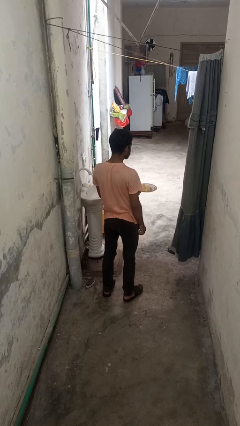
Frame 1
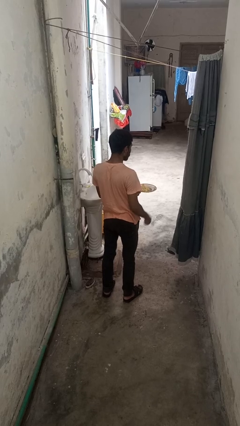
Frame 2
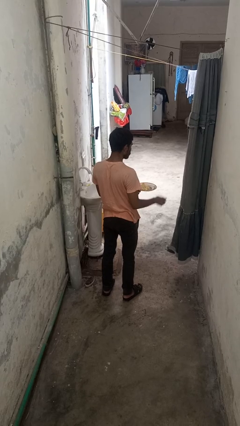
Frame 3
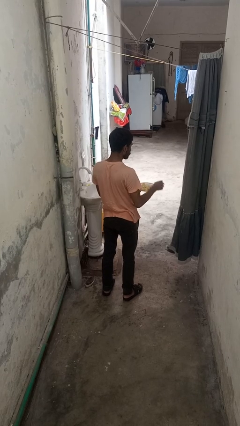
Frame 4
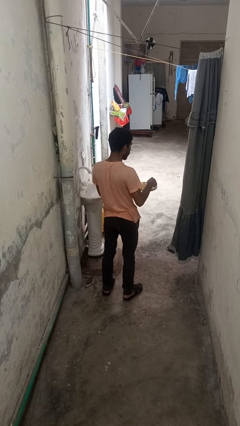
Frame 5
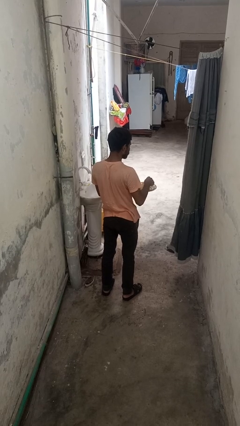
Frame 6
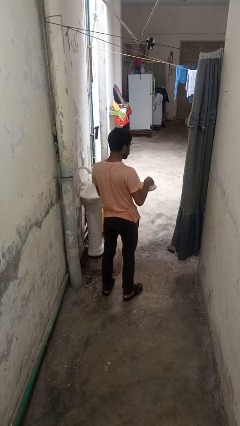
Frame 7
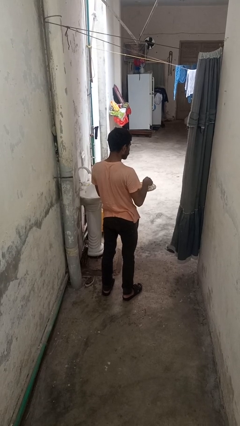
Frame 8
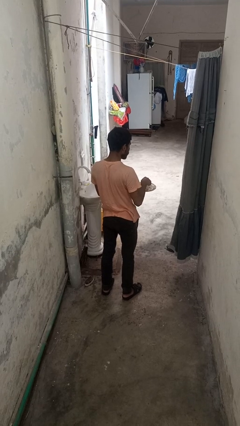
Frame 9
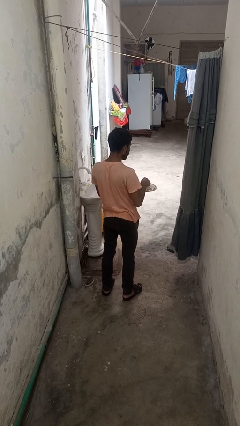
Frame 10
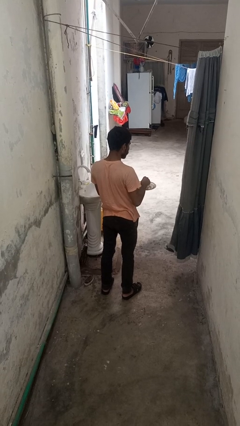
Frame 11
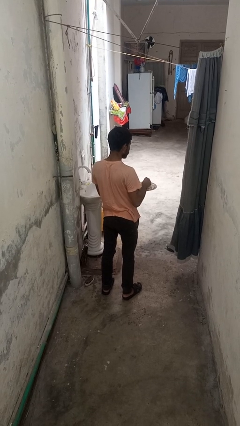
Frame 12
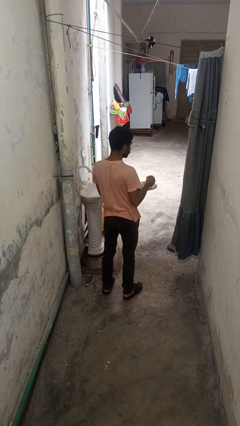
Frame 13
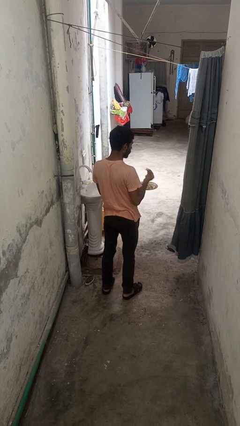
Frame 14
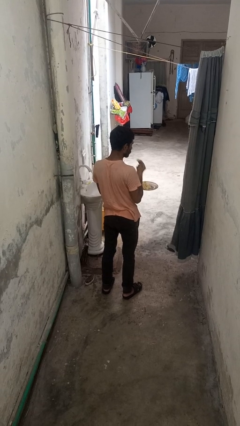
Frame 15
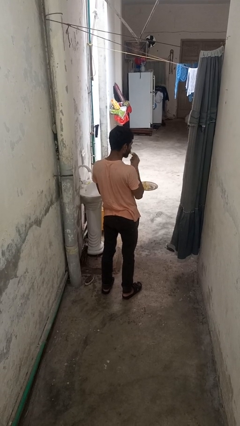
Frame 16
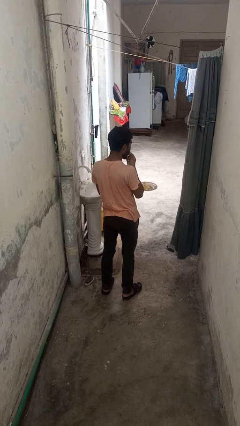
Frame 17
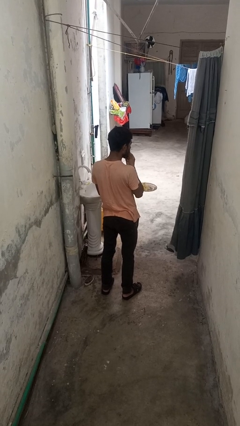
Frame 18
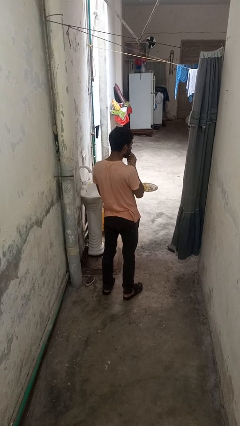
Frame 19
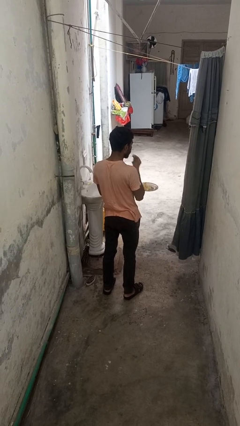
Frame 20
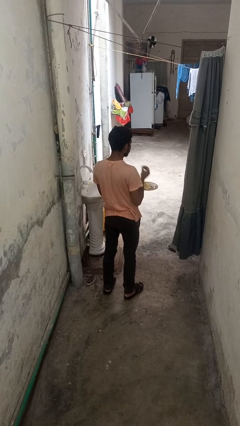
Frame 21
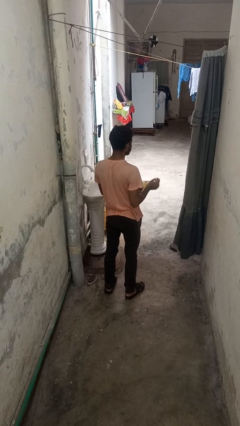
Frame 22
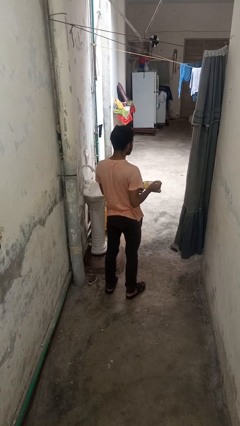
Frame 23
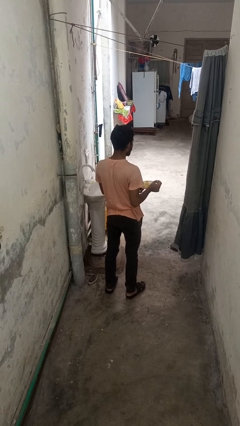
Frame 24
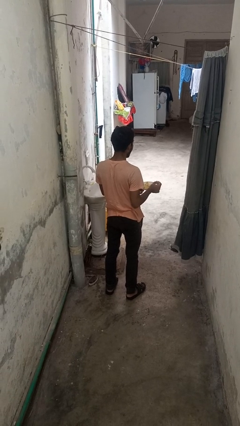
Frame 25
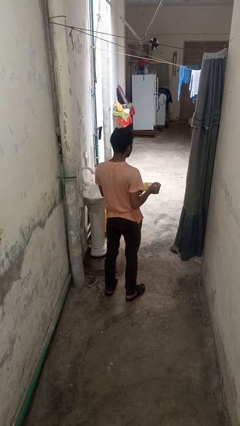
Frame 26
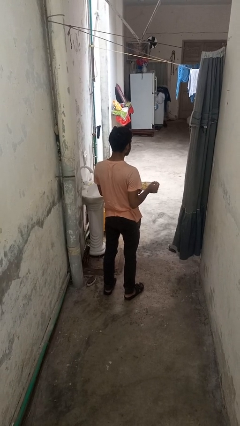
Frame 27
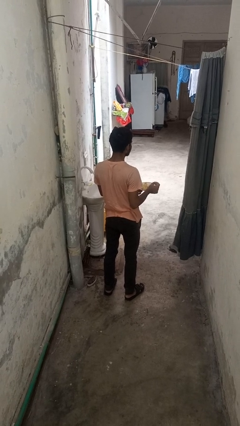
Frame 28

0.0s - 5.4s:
person eats with hands

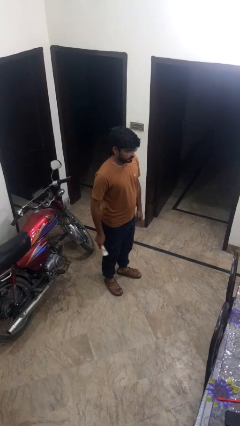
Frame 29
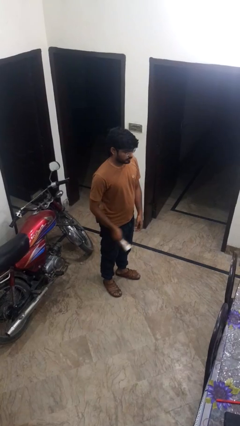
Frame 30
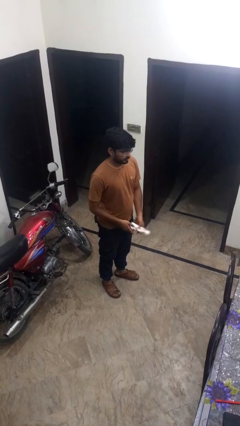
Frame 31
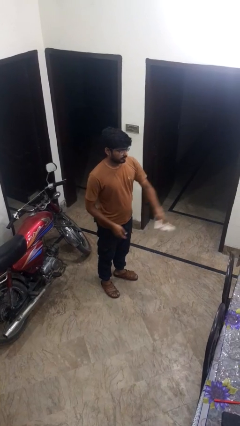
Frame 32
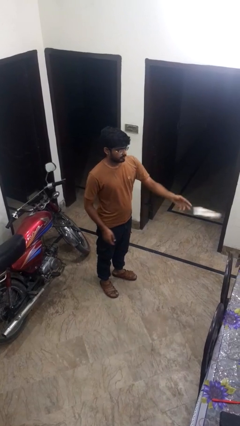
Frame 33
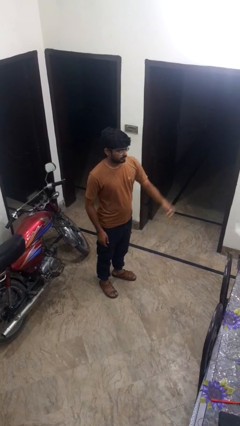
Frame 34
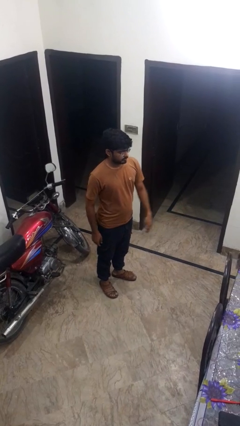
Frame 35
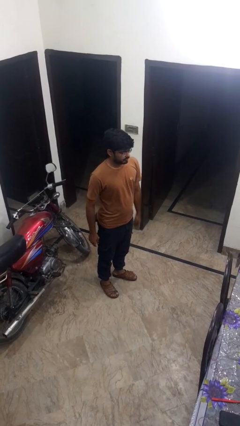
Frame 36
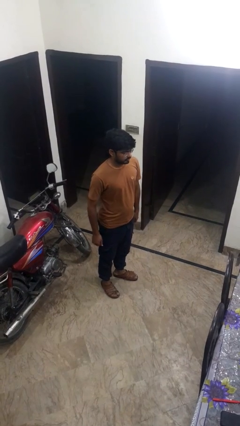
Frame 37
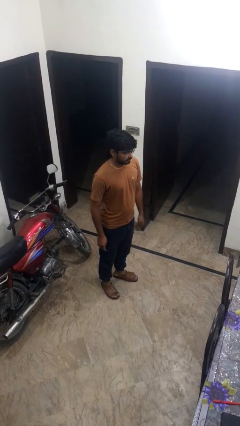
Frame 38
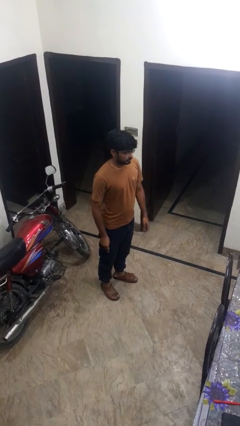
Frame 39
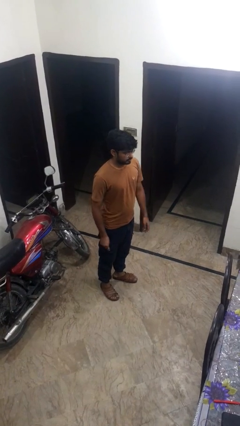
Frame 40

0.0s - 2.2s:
person throws object on table

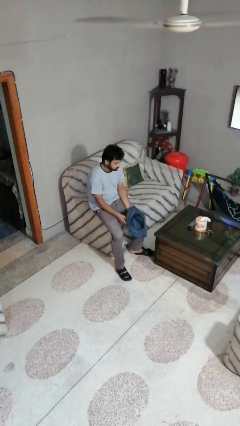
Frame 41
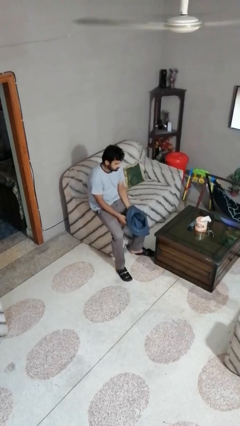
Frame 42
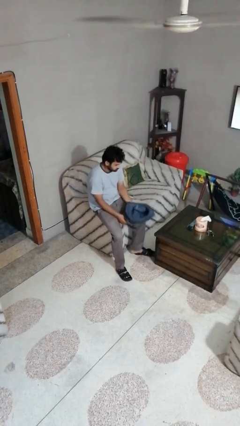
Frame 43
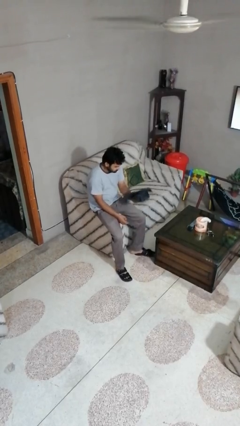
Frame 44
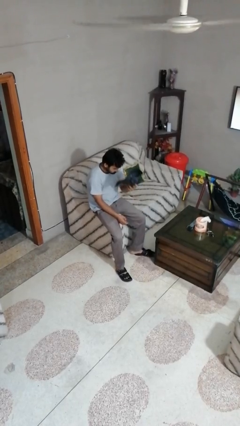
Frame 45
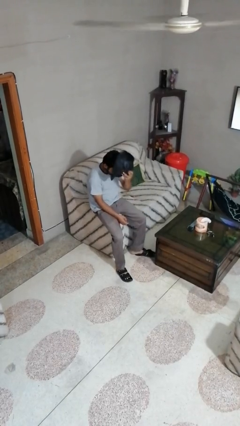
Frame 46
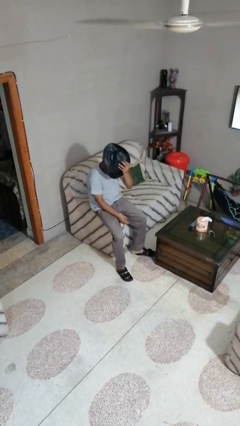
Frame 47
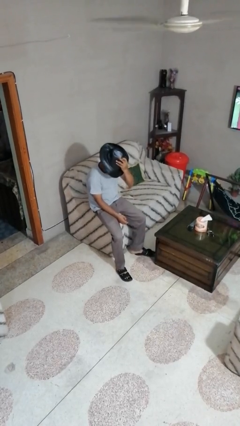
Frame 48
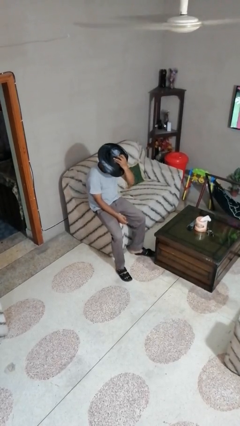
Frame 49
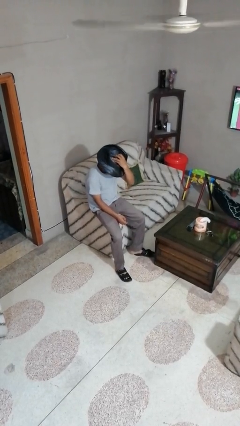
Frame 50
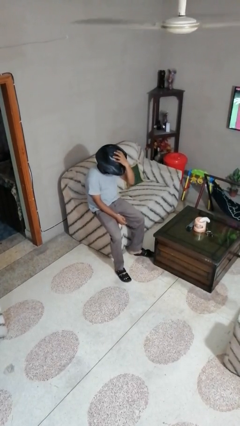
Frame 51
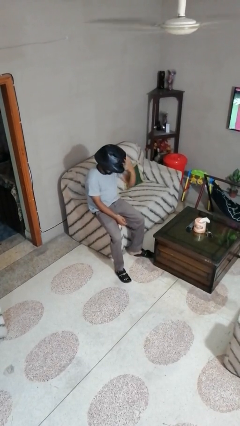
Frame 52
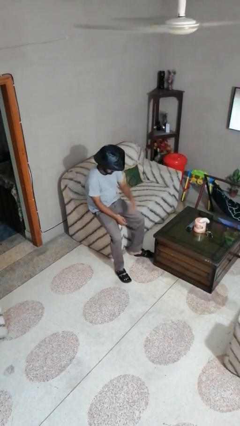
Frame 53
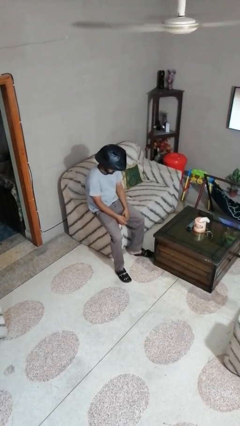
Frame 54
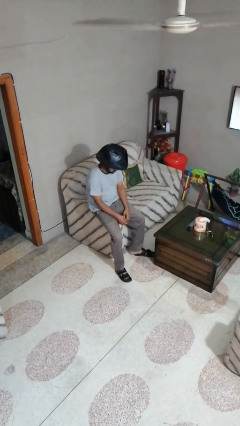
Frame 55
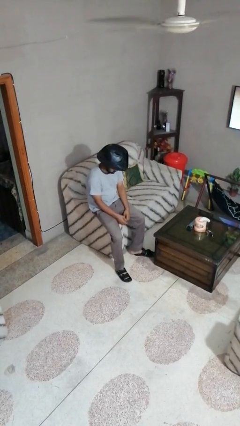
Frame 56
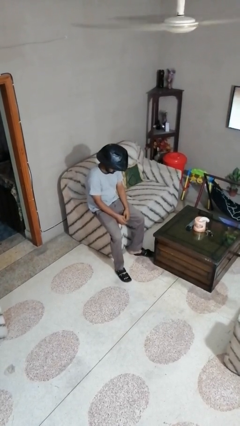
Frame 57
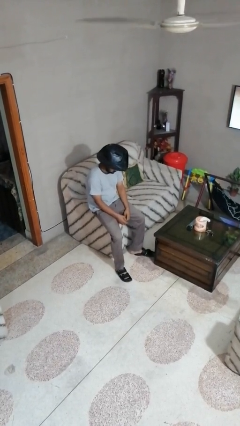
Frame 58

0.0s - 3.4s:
person puts on hat

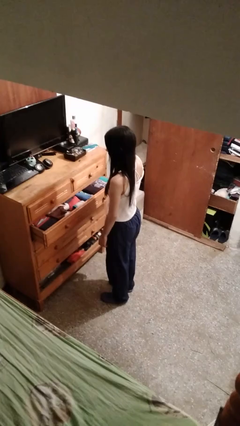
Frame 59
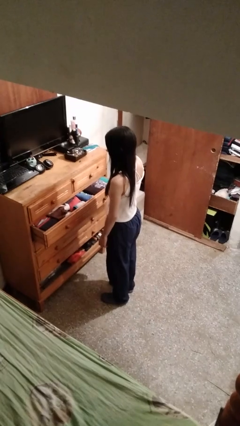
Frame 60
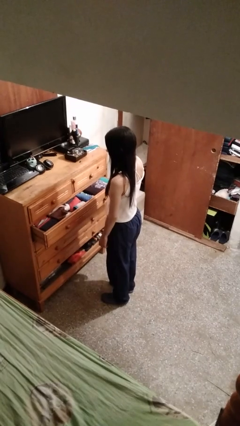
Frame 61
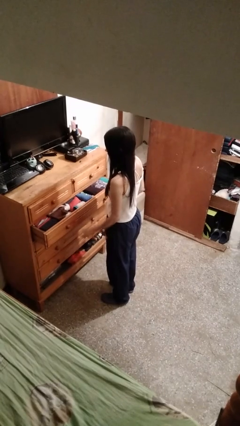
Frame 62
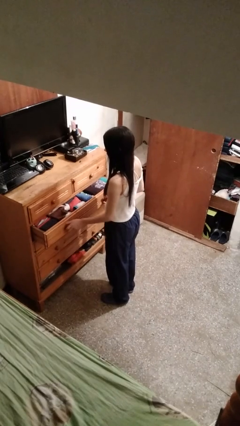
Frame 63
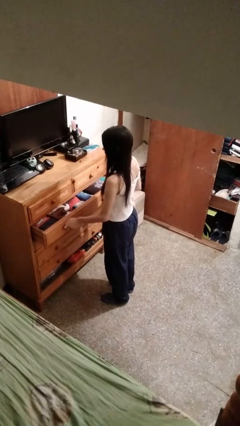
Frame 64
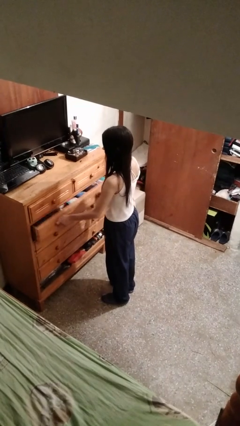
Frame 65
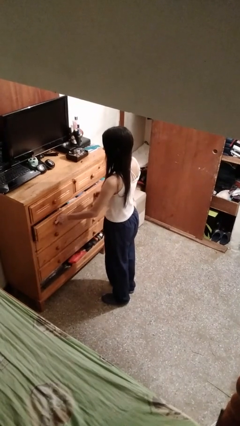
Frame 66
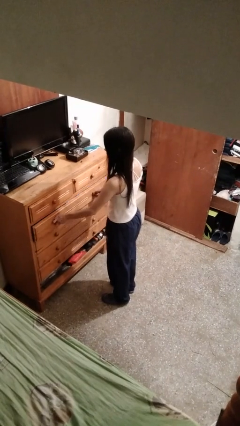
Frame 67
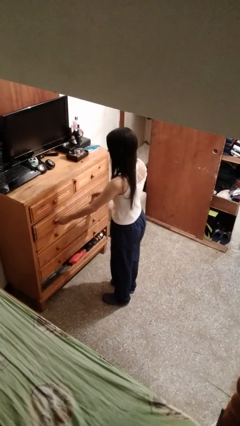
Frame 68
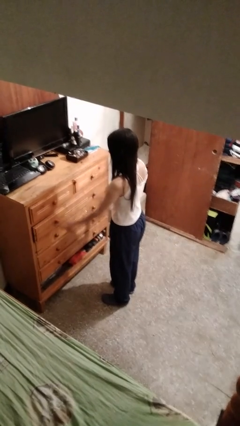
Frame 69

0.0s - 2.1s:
person closes dresser drawer

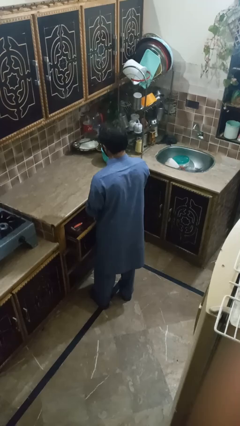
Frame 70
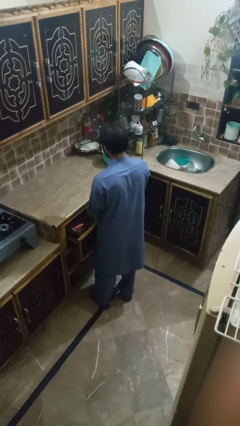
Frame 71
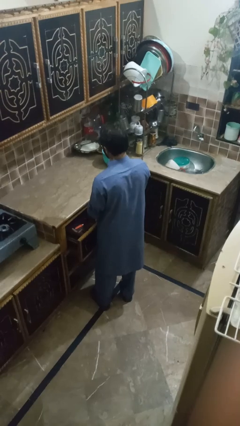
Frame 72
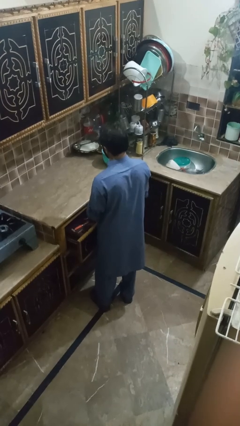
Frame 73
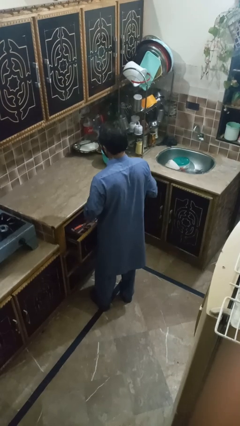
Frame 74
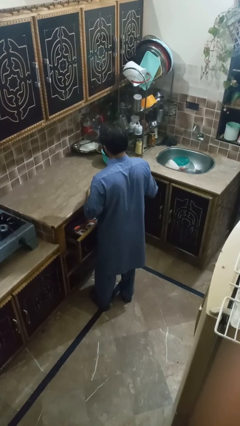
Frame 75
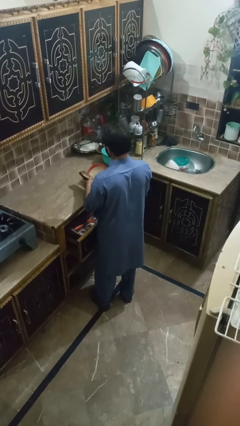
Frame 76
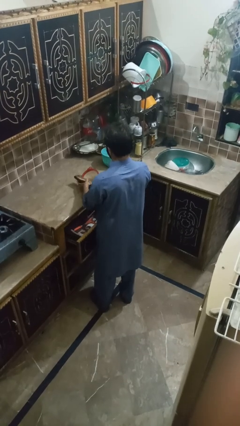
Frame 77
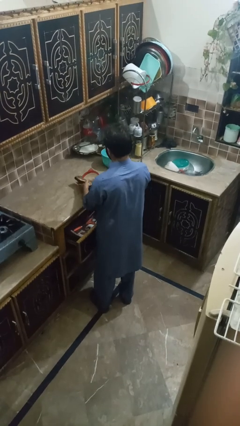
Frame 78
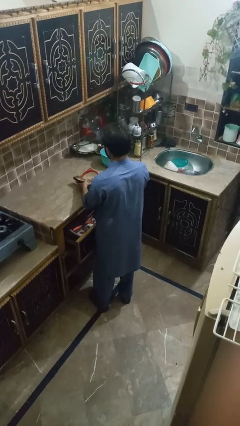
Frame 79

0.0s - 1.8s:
person takes object from kitchen drawer

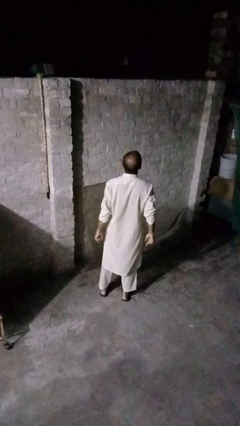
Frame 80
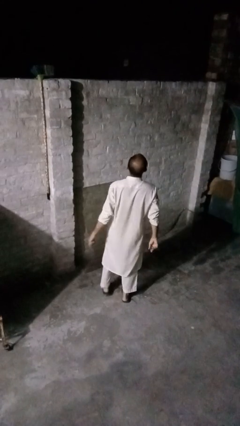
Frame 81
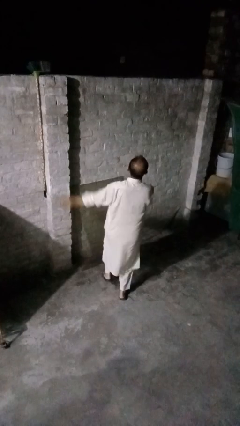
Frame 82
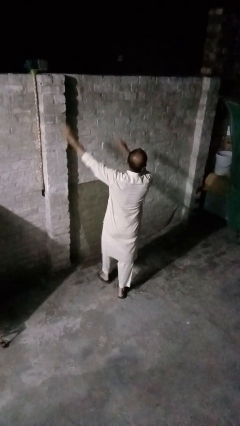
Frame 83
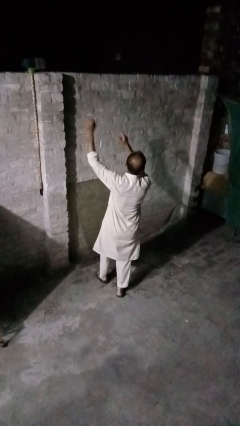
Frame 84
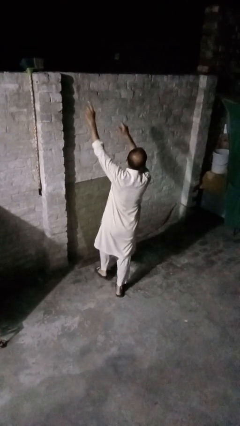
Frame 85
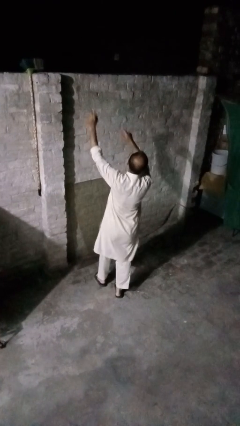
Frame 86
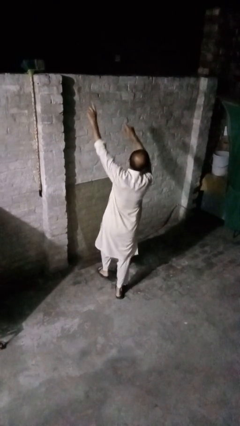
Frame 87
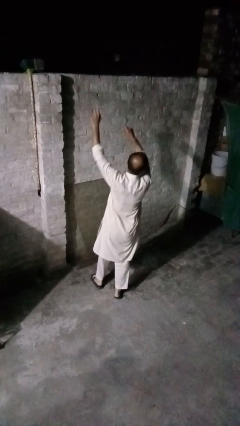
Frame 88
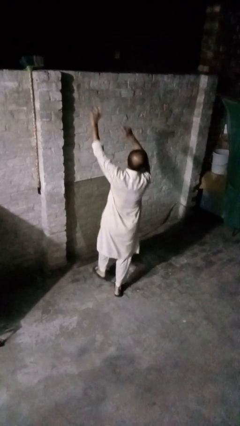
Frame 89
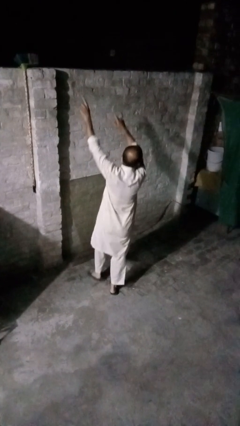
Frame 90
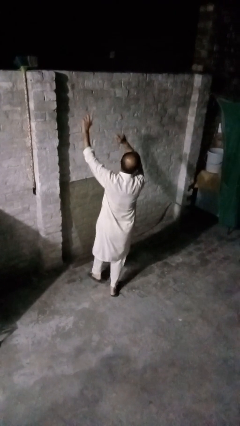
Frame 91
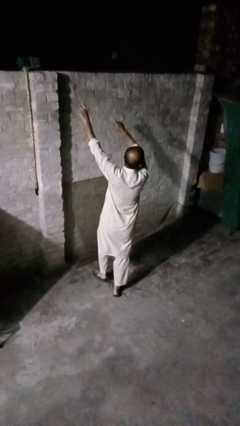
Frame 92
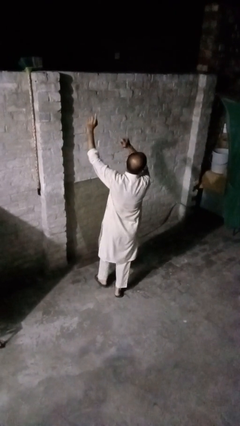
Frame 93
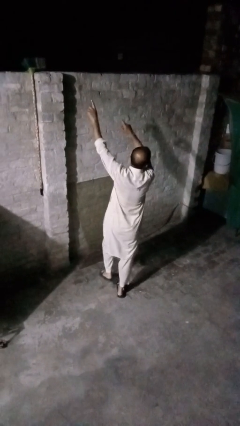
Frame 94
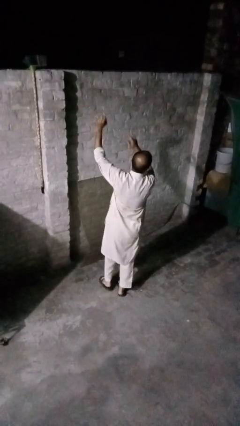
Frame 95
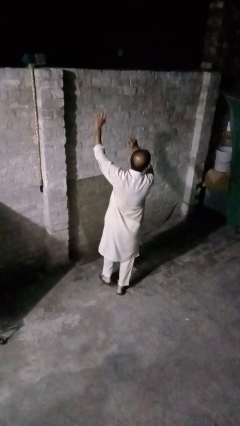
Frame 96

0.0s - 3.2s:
person dances in place
